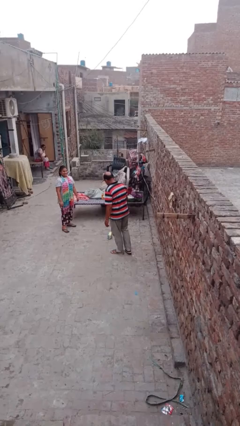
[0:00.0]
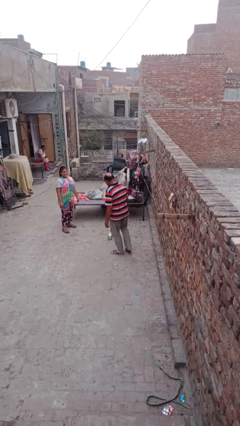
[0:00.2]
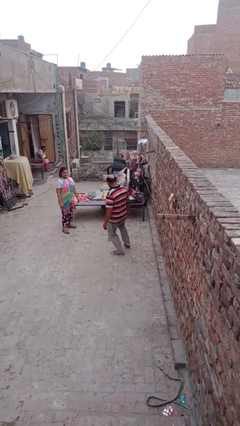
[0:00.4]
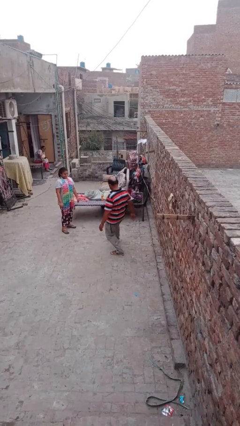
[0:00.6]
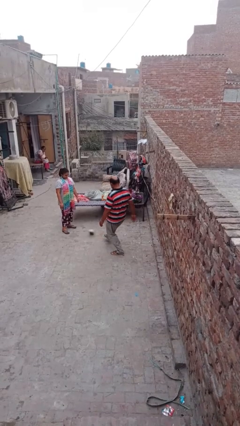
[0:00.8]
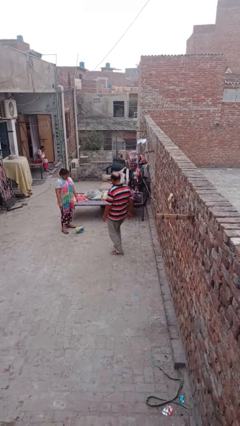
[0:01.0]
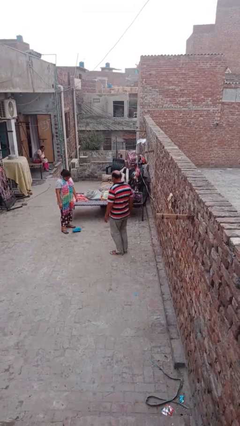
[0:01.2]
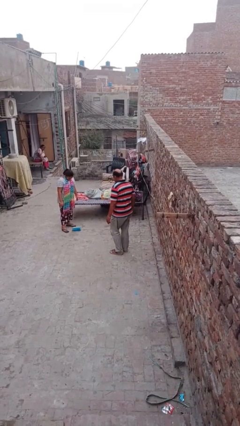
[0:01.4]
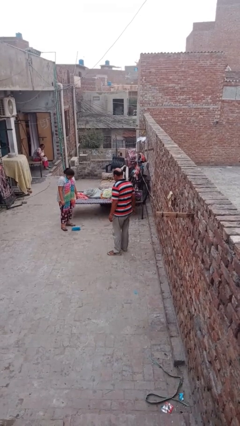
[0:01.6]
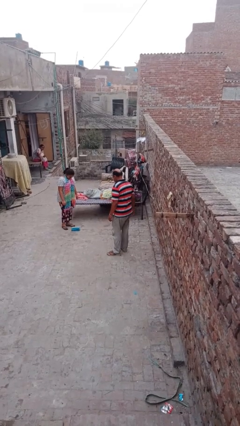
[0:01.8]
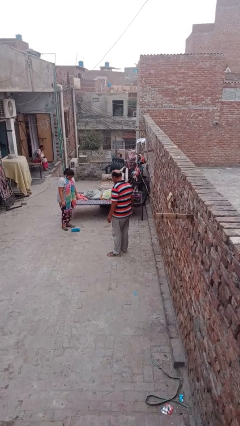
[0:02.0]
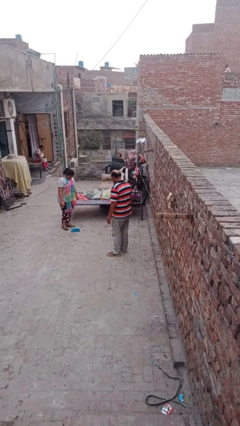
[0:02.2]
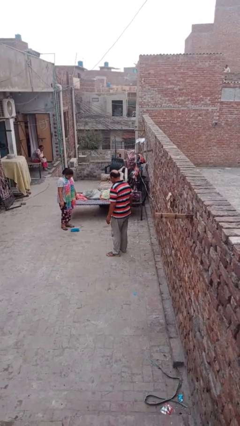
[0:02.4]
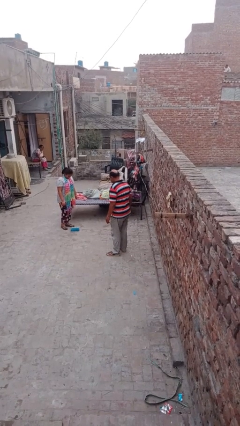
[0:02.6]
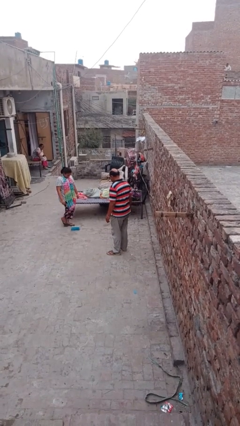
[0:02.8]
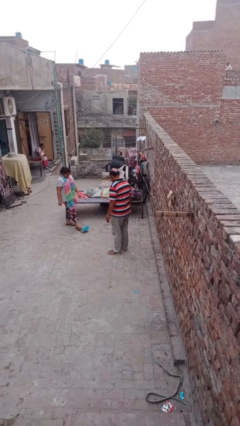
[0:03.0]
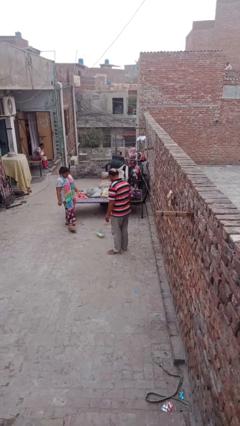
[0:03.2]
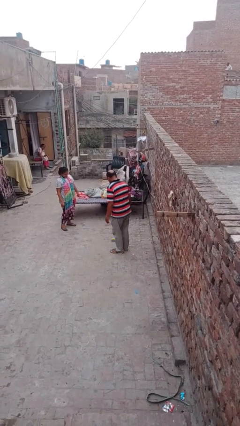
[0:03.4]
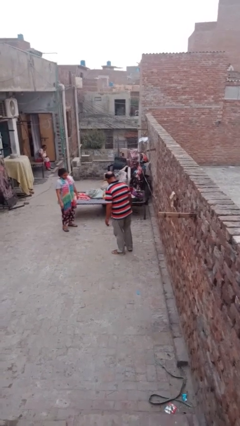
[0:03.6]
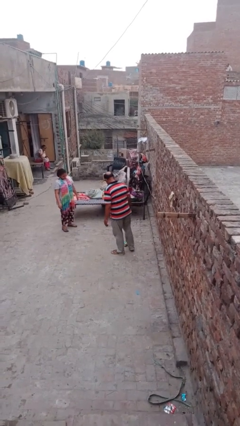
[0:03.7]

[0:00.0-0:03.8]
person kicks object to person

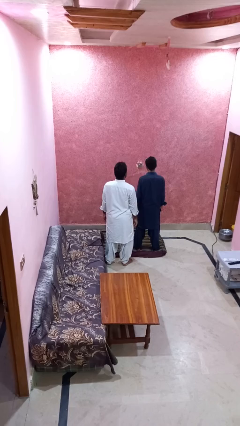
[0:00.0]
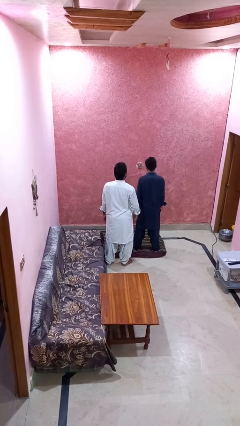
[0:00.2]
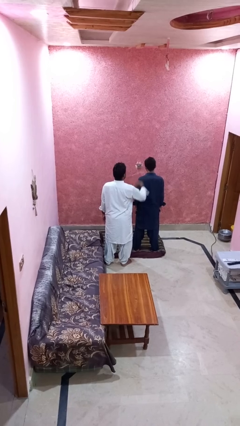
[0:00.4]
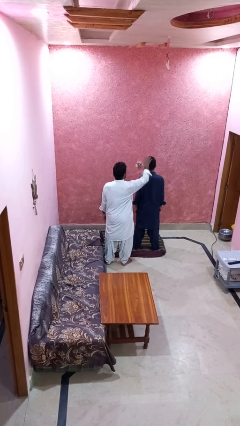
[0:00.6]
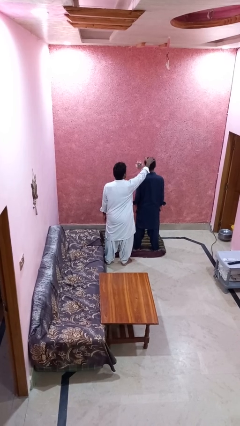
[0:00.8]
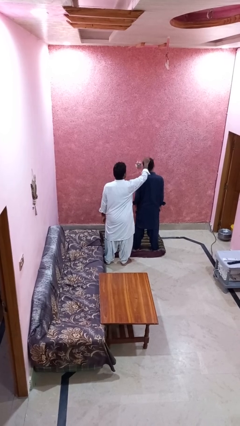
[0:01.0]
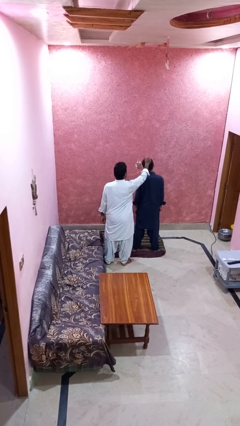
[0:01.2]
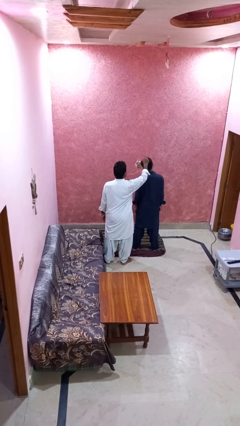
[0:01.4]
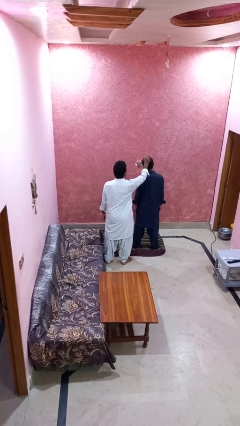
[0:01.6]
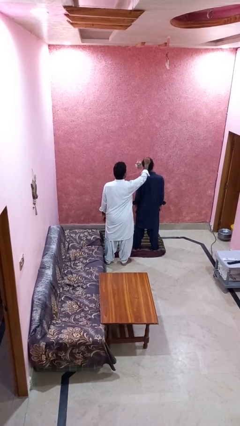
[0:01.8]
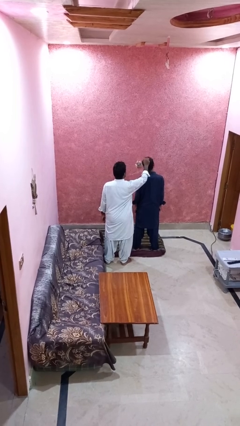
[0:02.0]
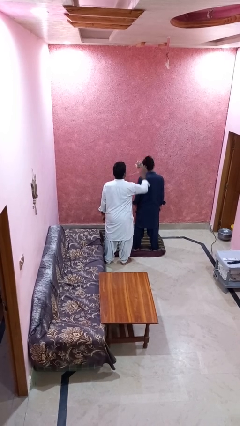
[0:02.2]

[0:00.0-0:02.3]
person grabs person by hair

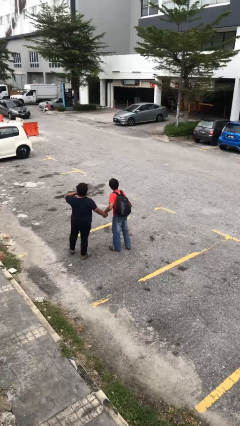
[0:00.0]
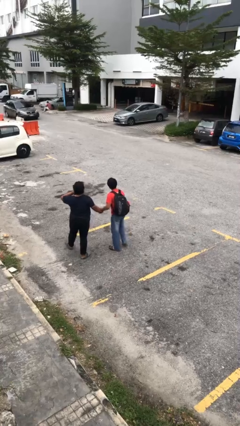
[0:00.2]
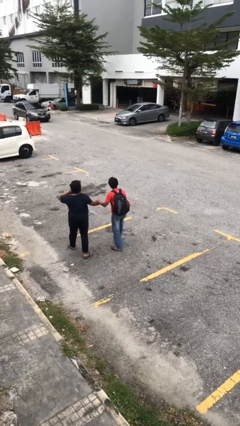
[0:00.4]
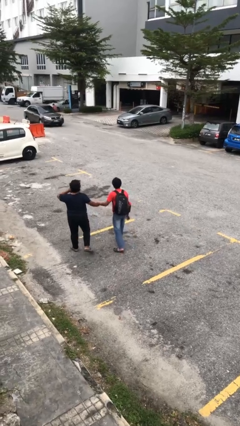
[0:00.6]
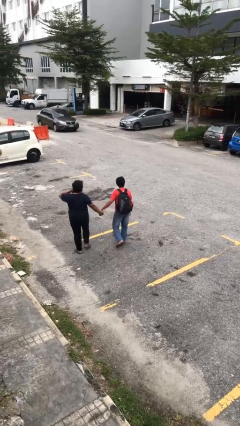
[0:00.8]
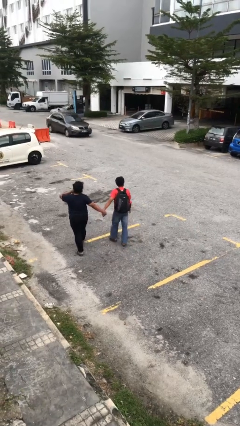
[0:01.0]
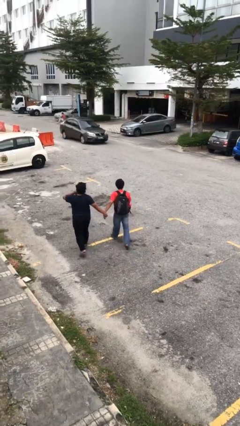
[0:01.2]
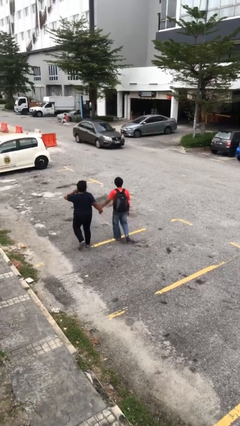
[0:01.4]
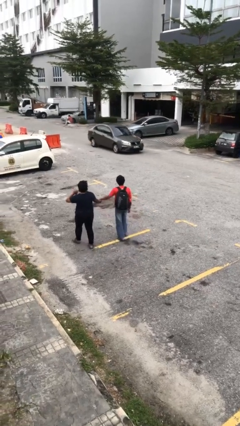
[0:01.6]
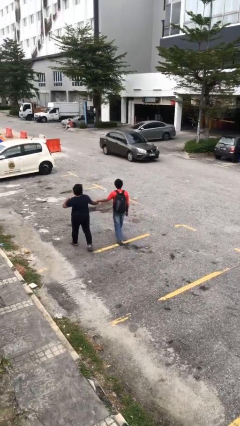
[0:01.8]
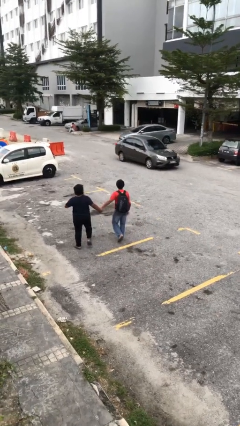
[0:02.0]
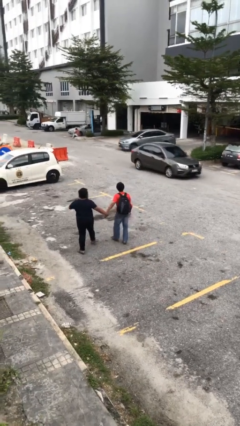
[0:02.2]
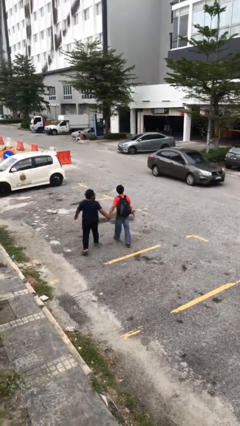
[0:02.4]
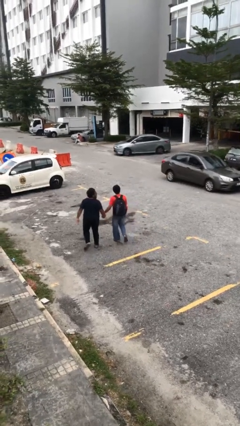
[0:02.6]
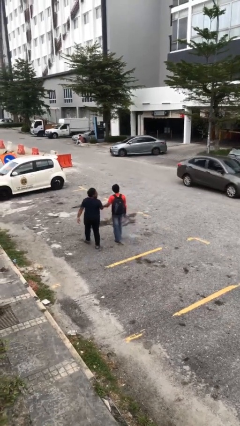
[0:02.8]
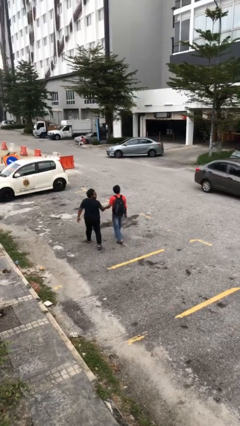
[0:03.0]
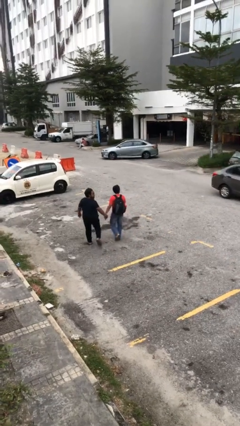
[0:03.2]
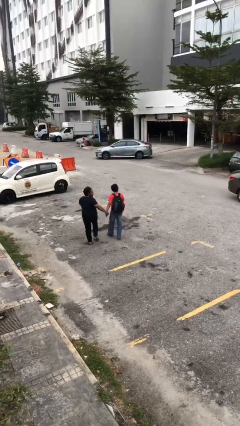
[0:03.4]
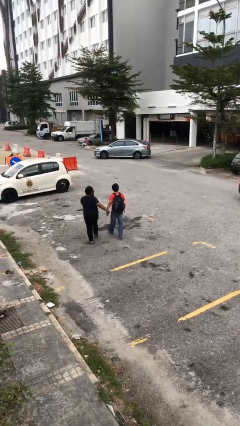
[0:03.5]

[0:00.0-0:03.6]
person holds hand

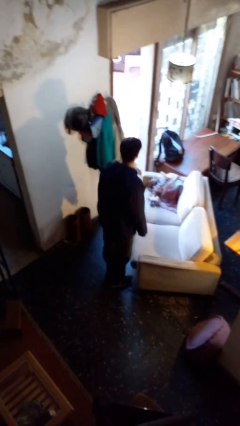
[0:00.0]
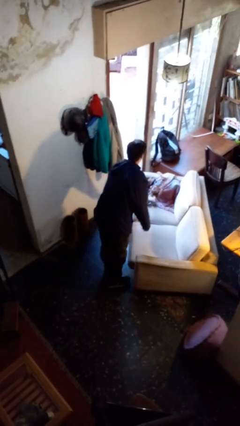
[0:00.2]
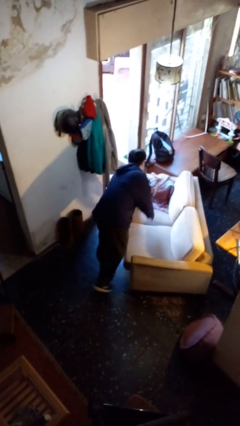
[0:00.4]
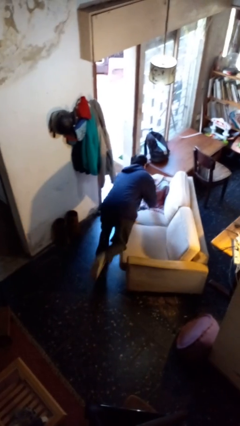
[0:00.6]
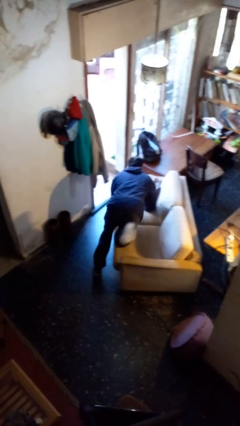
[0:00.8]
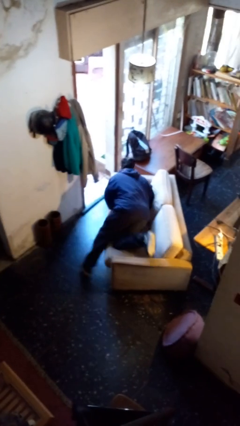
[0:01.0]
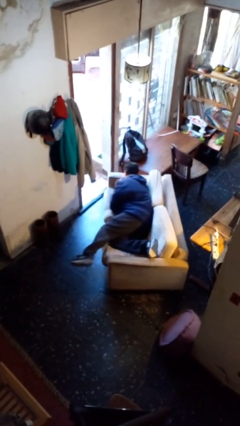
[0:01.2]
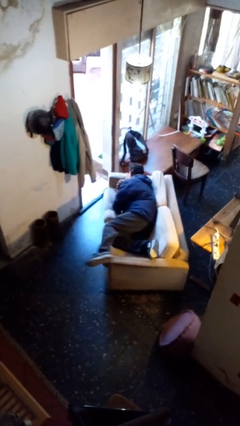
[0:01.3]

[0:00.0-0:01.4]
person lies down on couch

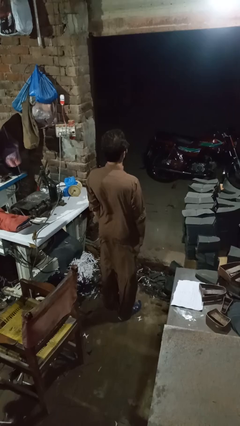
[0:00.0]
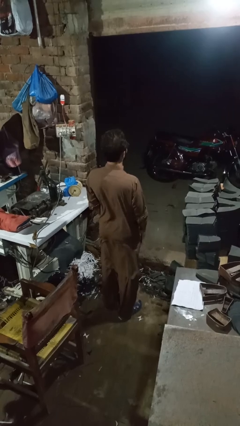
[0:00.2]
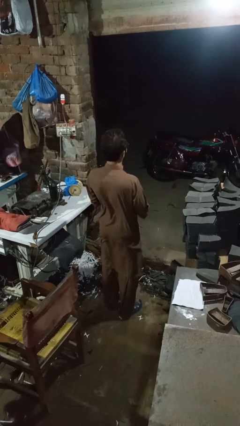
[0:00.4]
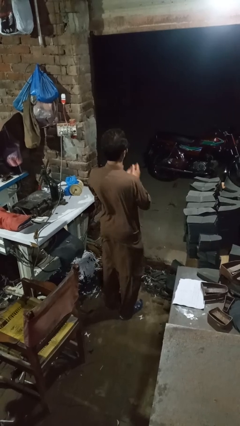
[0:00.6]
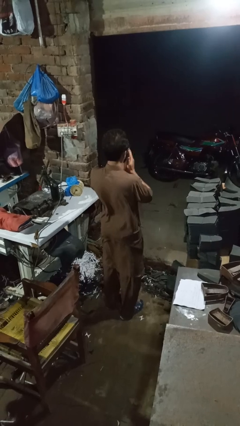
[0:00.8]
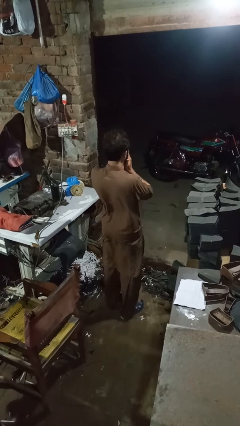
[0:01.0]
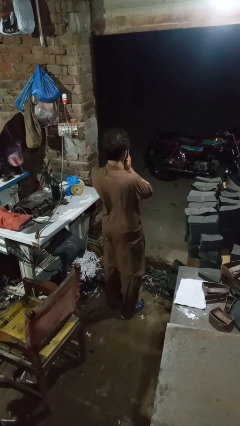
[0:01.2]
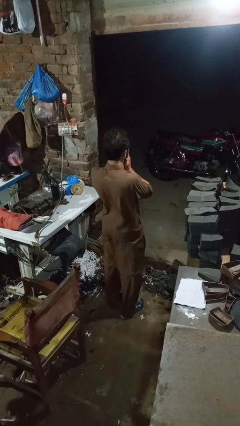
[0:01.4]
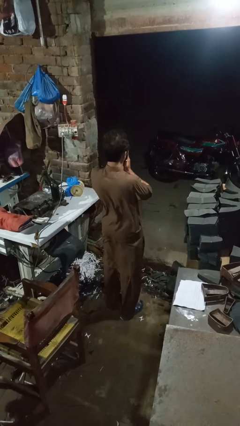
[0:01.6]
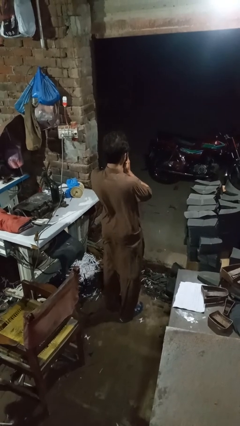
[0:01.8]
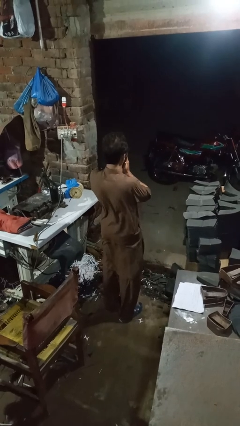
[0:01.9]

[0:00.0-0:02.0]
person sneezes into hand

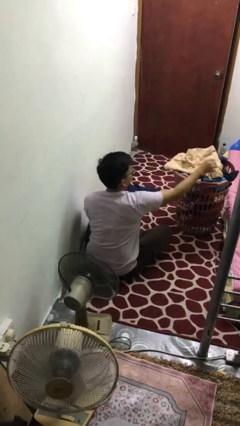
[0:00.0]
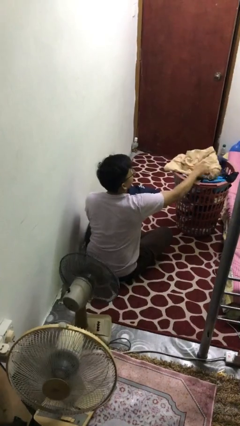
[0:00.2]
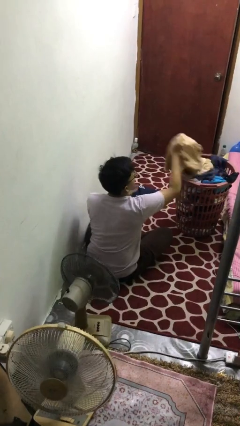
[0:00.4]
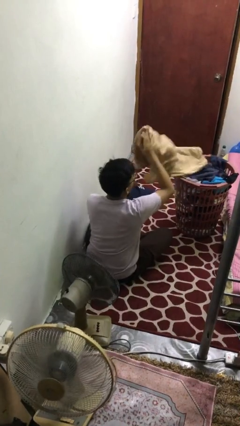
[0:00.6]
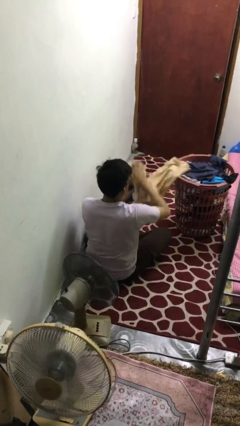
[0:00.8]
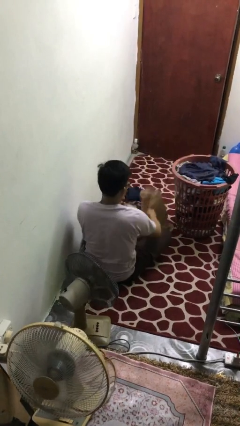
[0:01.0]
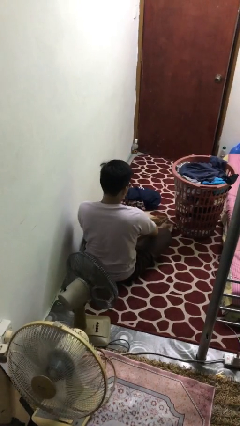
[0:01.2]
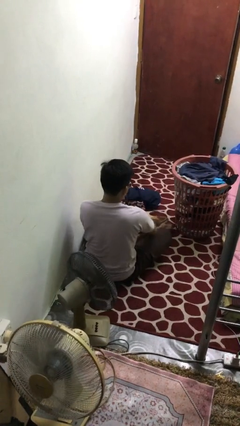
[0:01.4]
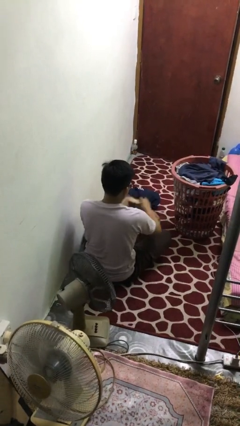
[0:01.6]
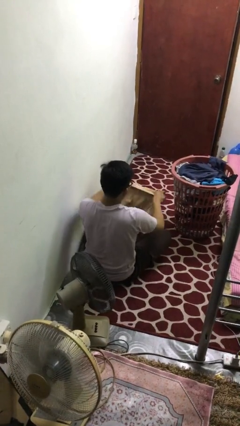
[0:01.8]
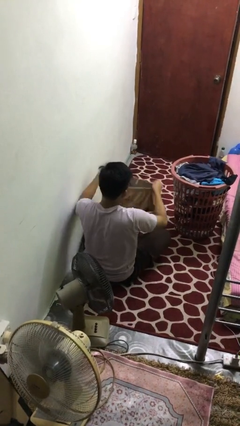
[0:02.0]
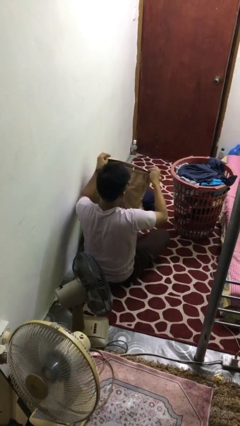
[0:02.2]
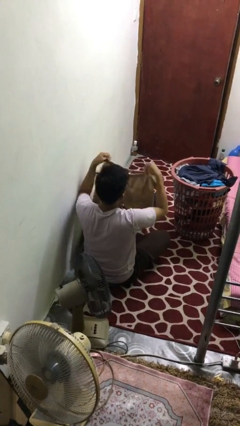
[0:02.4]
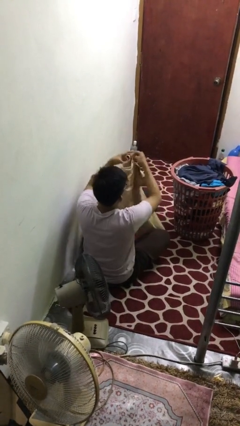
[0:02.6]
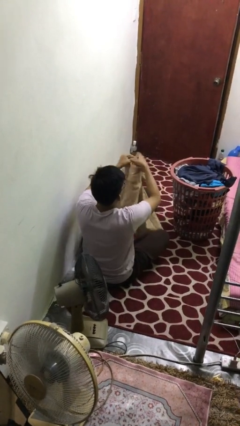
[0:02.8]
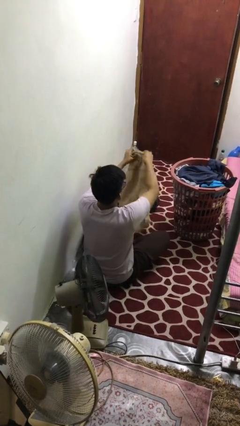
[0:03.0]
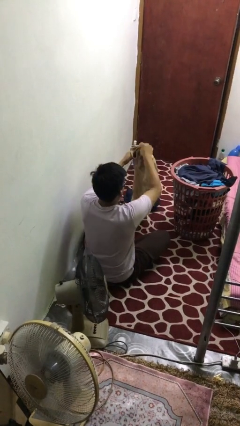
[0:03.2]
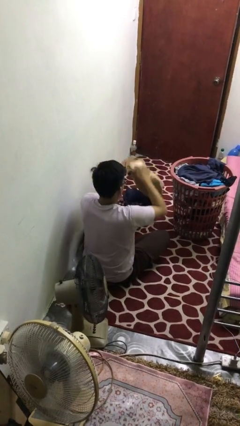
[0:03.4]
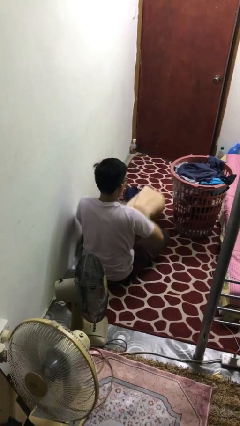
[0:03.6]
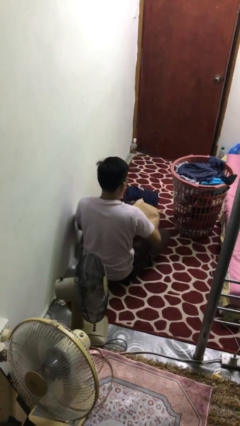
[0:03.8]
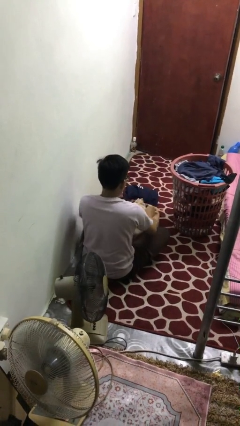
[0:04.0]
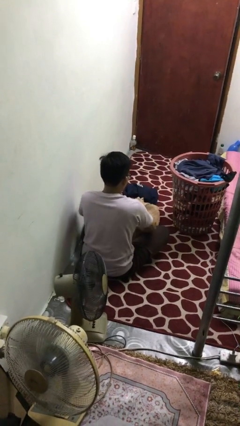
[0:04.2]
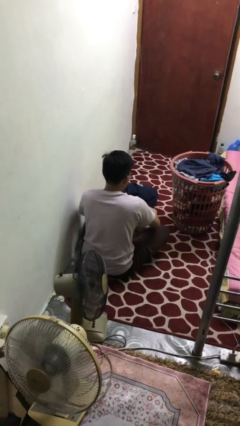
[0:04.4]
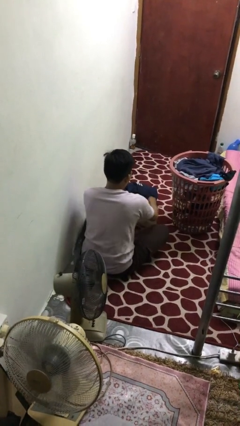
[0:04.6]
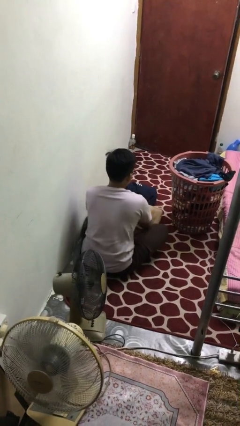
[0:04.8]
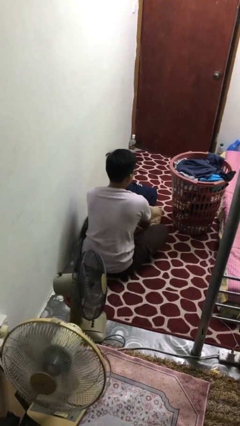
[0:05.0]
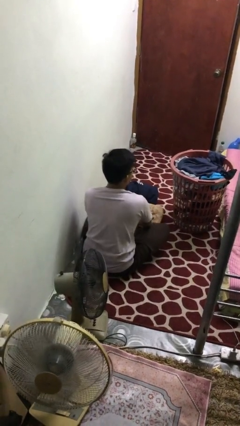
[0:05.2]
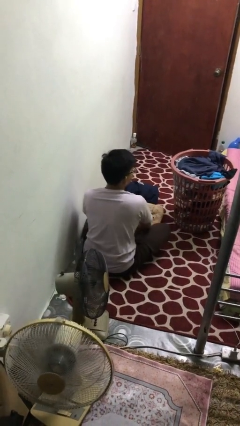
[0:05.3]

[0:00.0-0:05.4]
person folds pants
